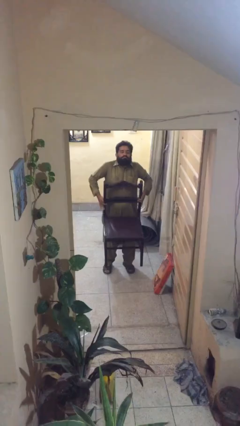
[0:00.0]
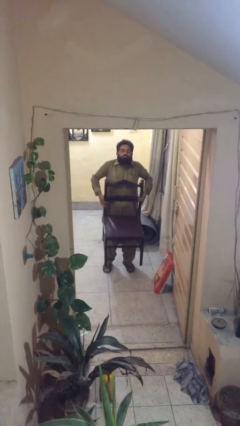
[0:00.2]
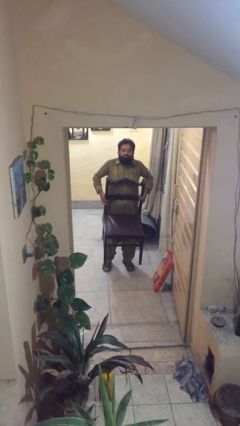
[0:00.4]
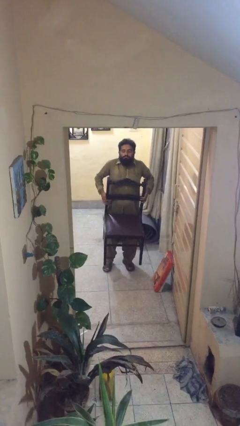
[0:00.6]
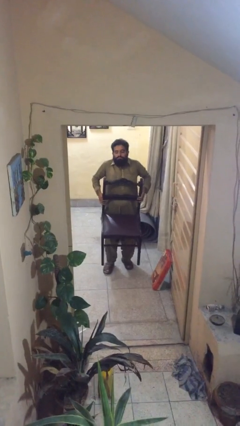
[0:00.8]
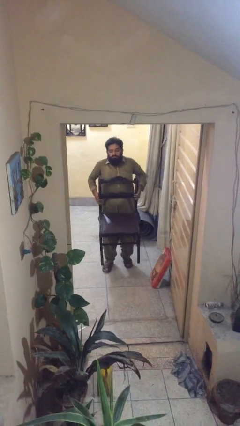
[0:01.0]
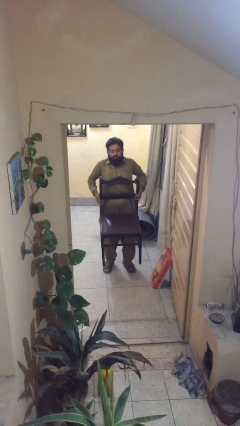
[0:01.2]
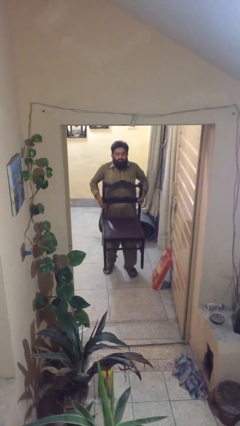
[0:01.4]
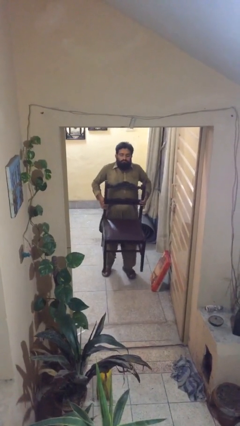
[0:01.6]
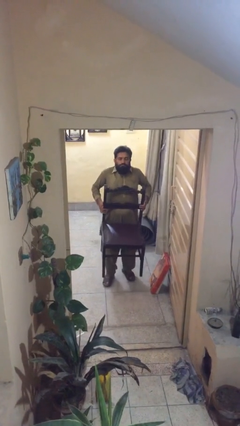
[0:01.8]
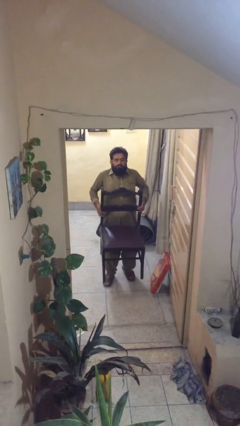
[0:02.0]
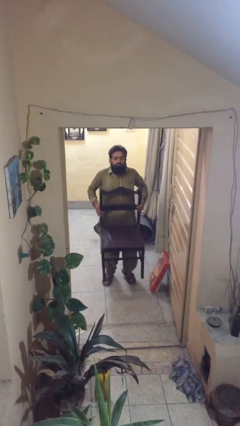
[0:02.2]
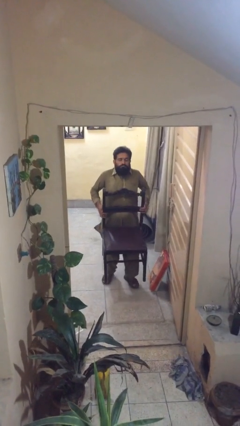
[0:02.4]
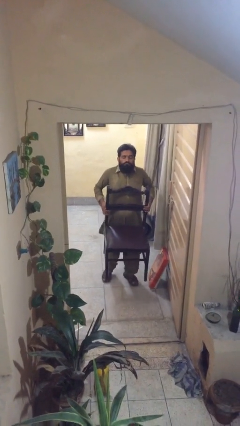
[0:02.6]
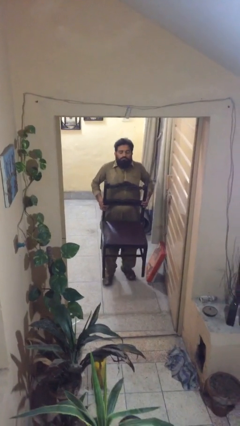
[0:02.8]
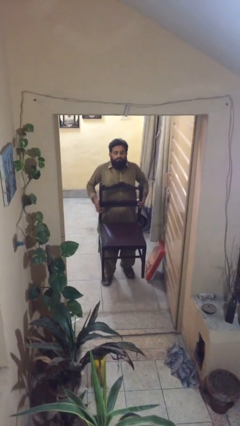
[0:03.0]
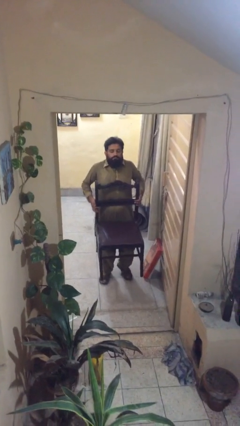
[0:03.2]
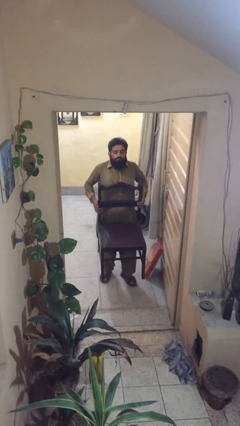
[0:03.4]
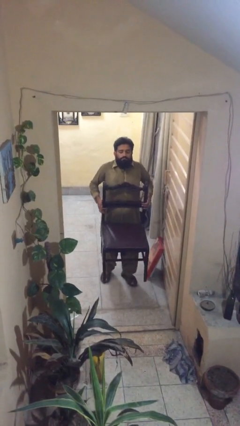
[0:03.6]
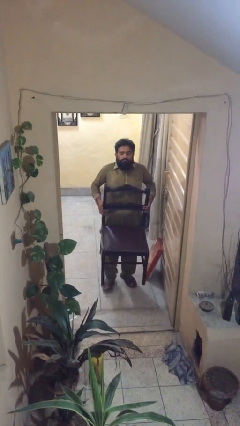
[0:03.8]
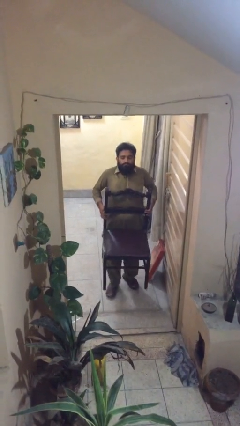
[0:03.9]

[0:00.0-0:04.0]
person carries heavy object

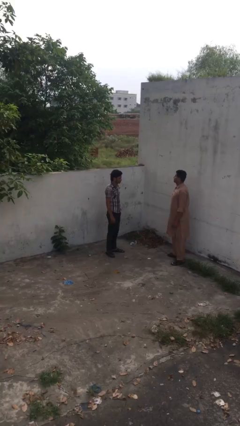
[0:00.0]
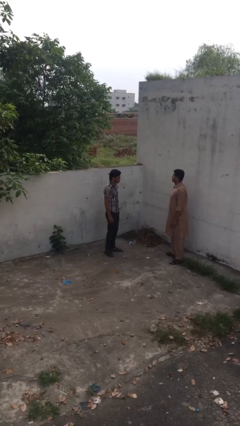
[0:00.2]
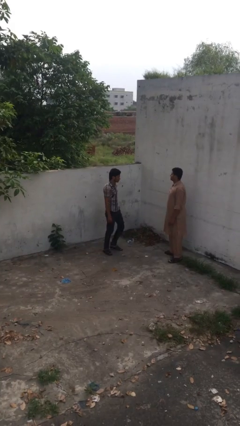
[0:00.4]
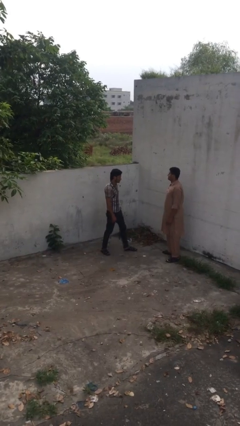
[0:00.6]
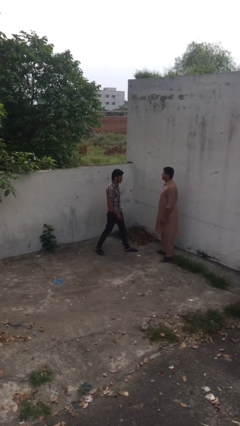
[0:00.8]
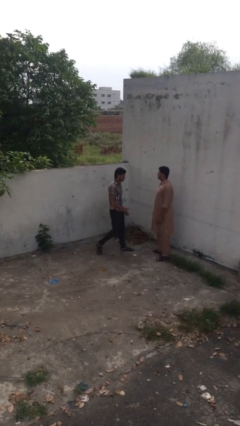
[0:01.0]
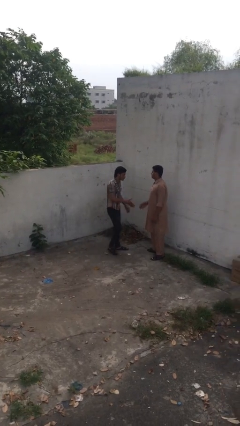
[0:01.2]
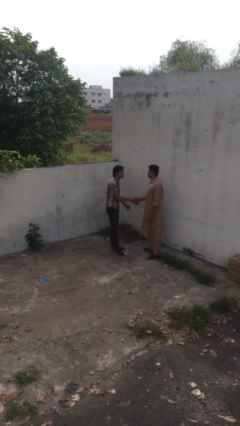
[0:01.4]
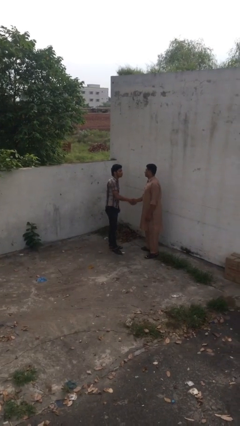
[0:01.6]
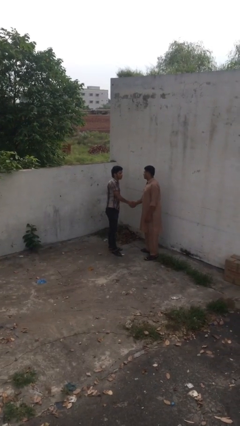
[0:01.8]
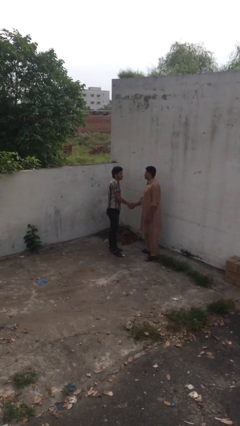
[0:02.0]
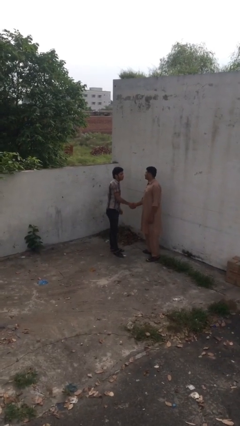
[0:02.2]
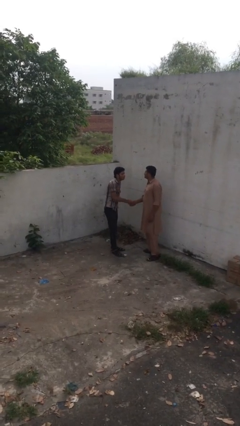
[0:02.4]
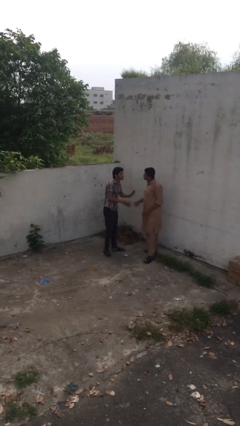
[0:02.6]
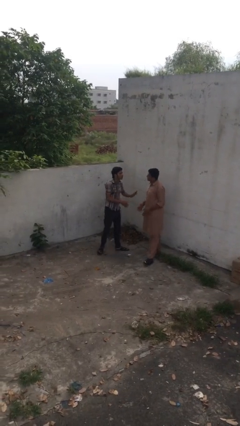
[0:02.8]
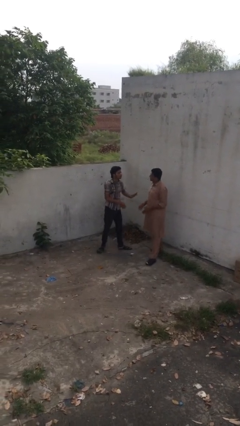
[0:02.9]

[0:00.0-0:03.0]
person shakes hand

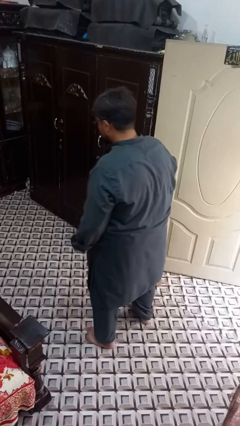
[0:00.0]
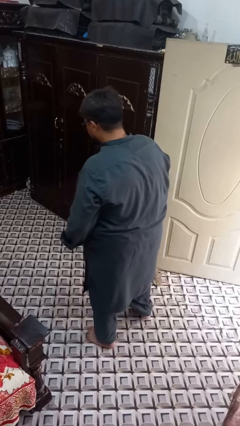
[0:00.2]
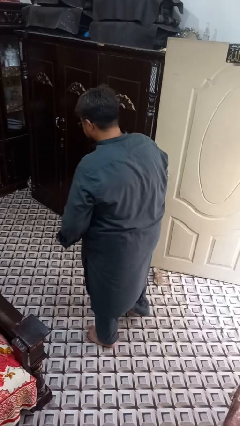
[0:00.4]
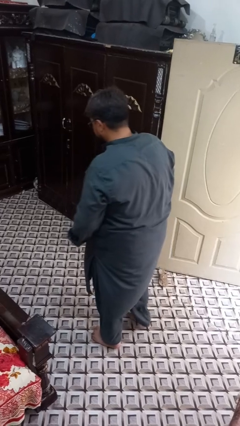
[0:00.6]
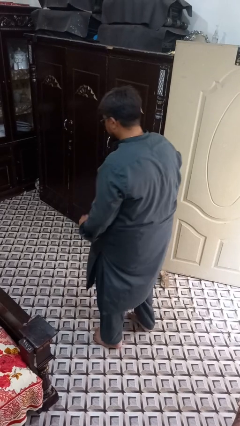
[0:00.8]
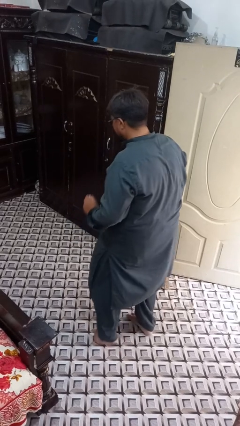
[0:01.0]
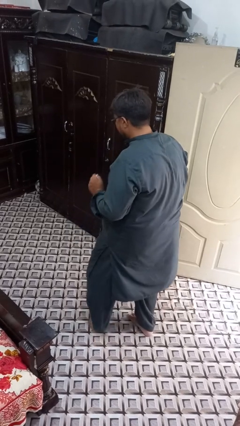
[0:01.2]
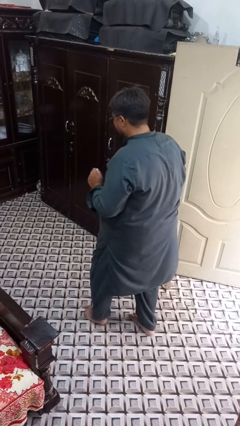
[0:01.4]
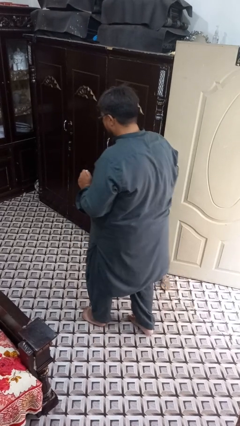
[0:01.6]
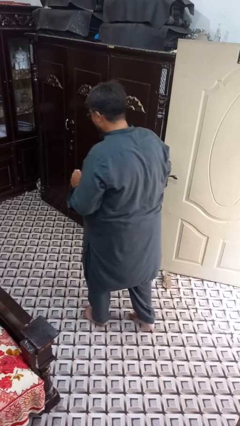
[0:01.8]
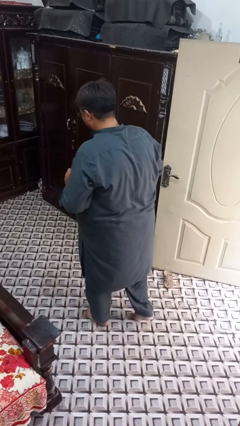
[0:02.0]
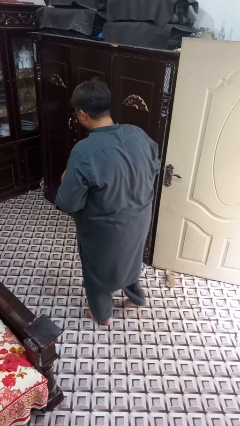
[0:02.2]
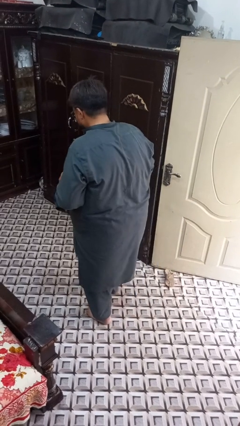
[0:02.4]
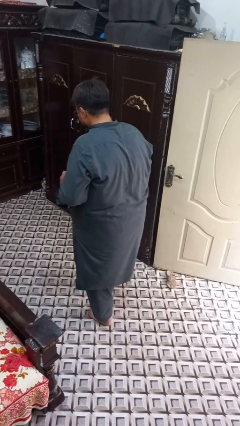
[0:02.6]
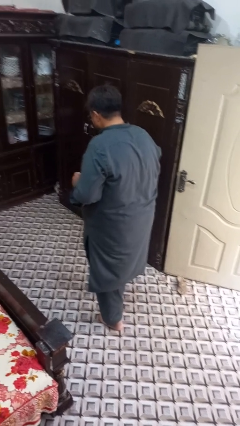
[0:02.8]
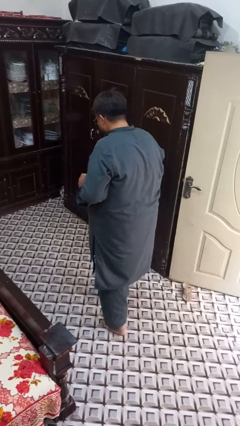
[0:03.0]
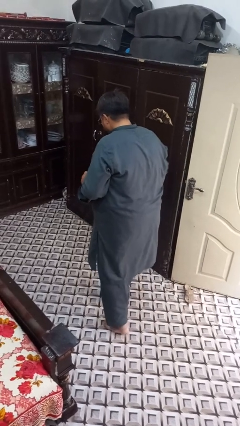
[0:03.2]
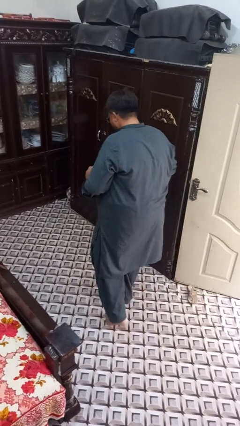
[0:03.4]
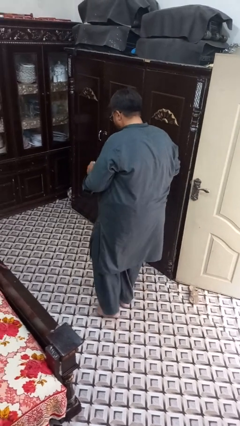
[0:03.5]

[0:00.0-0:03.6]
person walks tiptoe

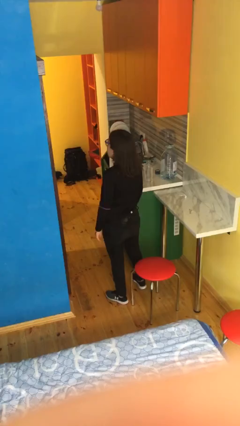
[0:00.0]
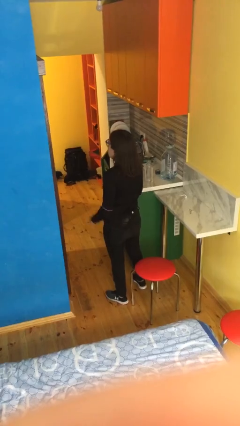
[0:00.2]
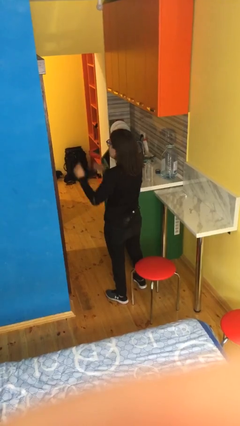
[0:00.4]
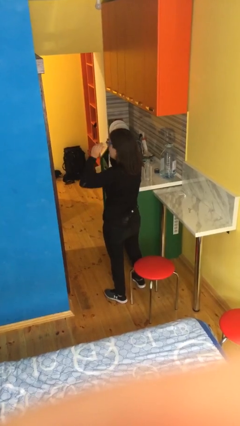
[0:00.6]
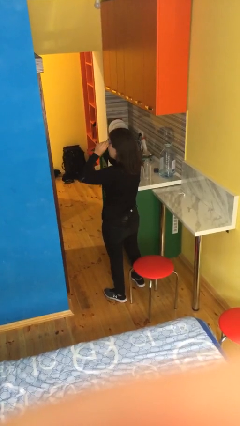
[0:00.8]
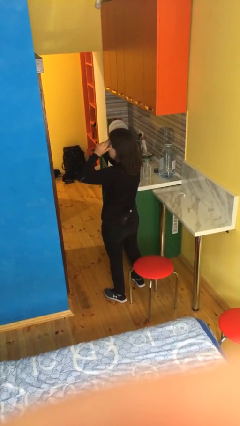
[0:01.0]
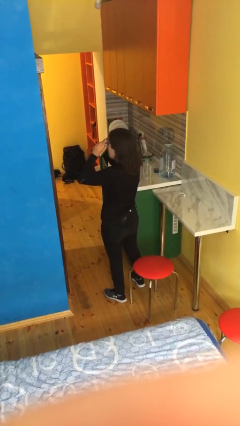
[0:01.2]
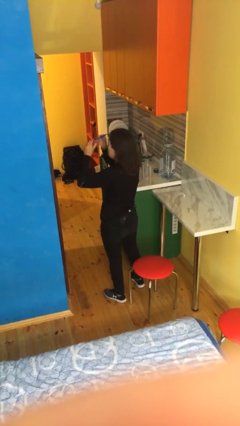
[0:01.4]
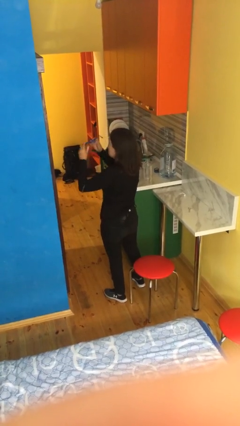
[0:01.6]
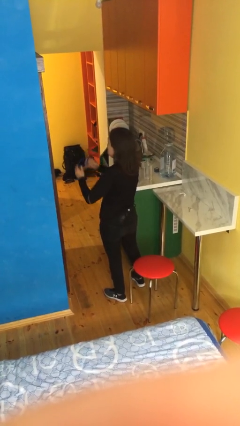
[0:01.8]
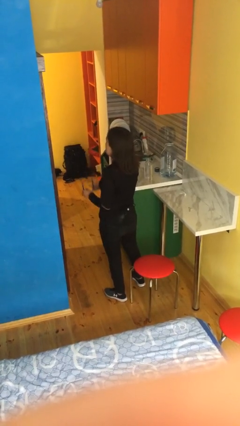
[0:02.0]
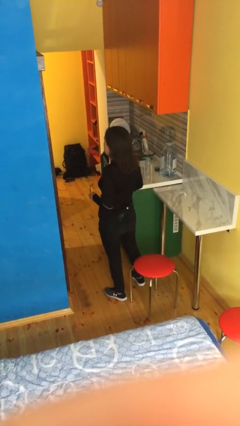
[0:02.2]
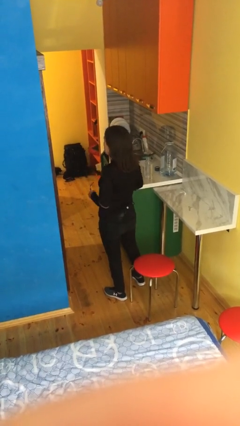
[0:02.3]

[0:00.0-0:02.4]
person takes off glasses

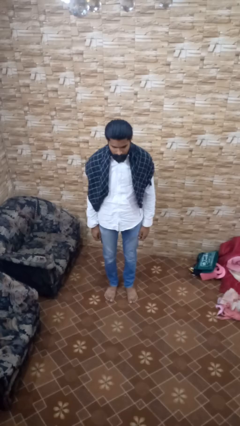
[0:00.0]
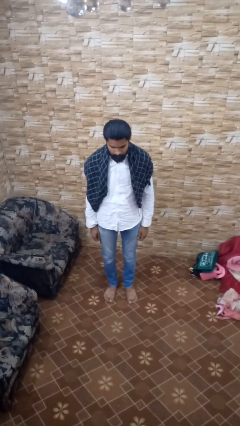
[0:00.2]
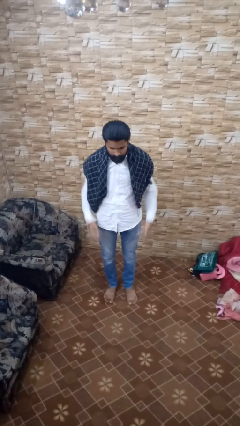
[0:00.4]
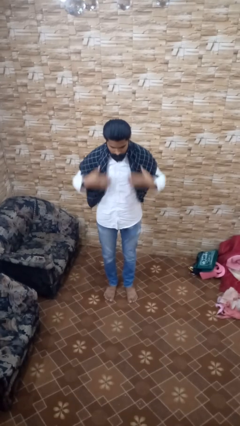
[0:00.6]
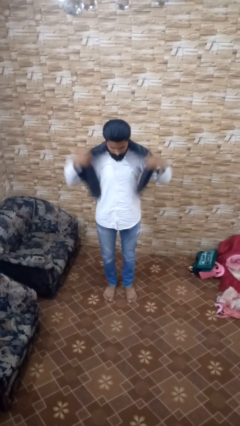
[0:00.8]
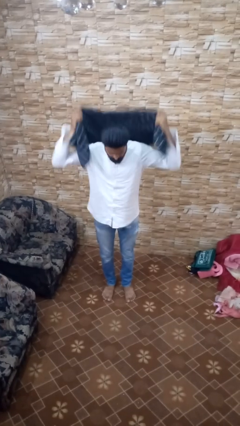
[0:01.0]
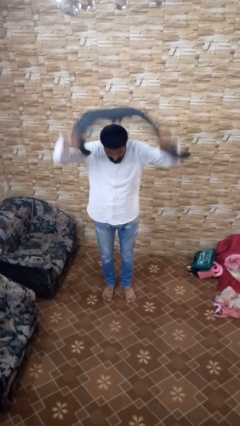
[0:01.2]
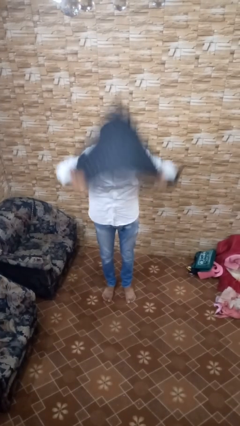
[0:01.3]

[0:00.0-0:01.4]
person takes off scarf

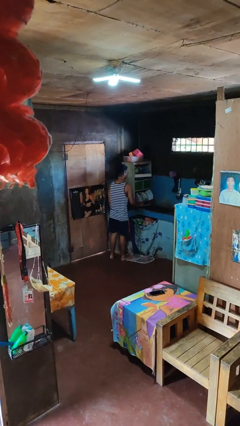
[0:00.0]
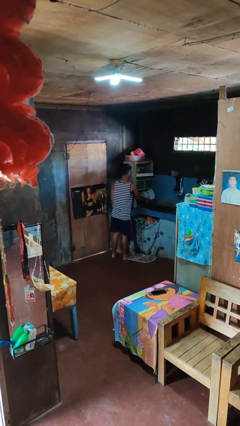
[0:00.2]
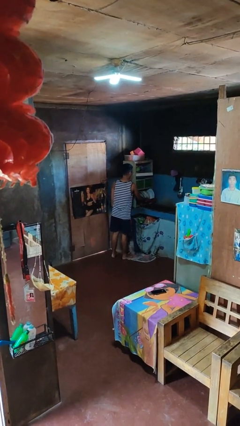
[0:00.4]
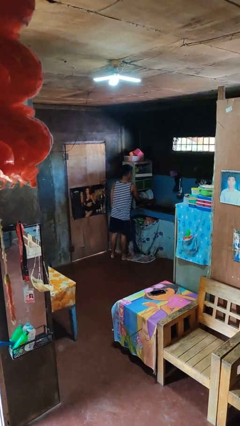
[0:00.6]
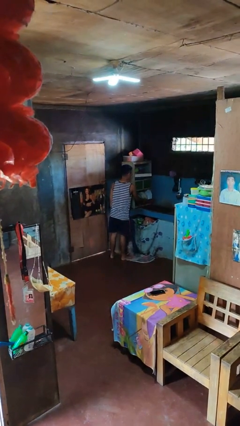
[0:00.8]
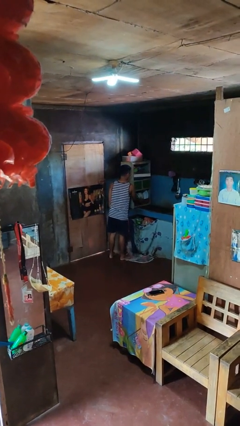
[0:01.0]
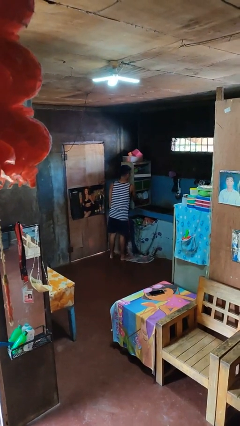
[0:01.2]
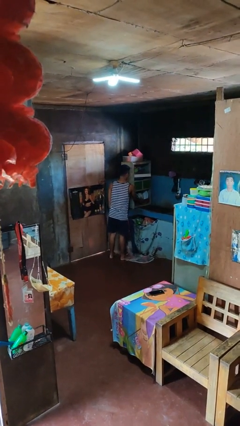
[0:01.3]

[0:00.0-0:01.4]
person closes dishwasher

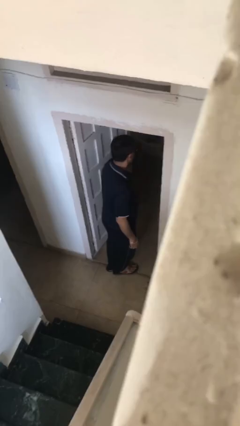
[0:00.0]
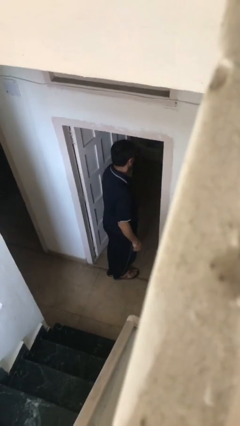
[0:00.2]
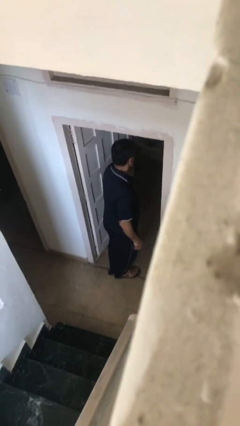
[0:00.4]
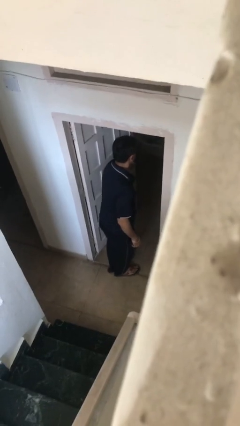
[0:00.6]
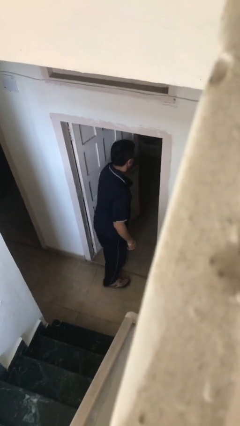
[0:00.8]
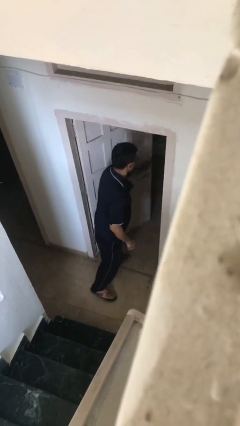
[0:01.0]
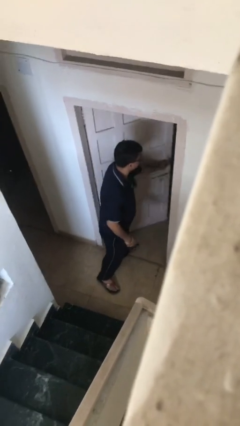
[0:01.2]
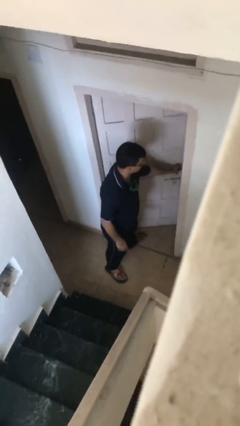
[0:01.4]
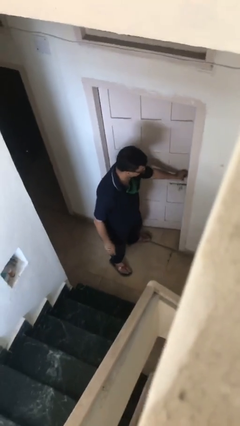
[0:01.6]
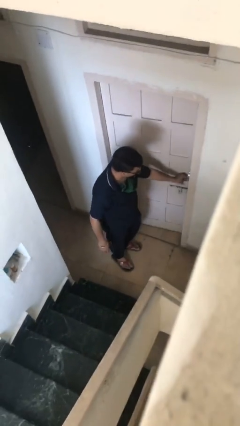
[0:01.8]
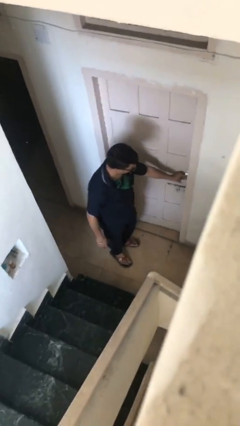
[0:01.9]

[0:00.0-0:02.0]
person closes facility door
